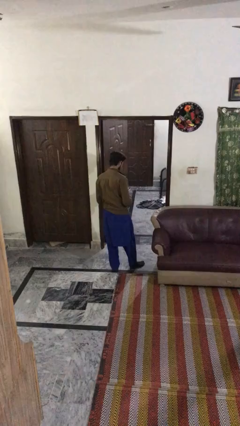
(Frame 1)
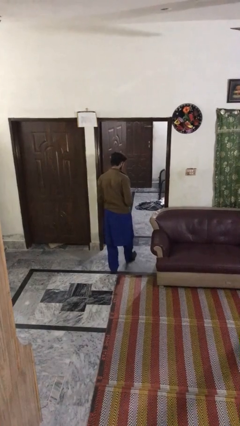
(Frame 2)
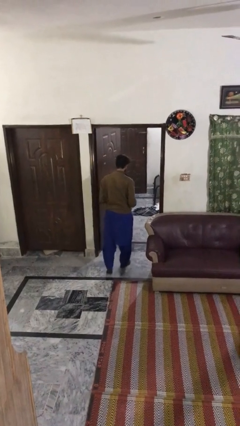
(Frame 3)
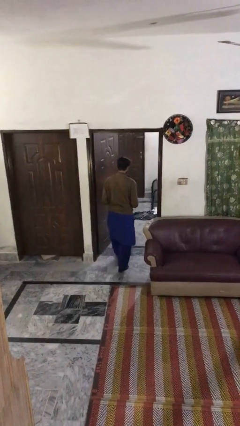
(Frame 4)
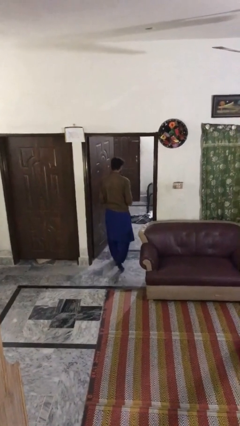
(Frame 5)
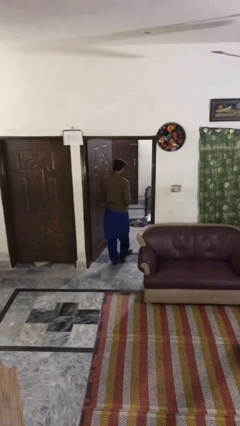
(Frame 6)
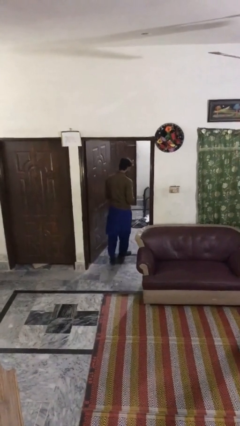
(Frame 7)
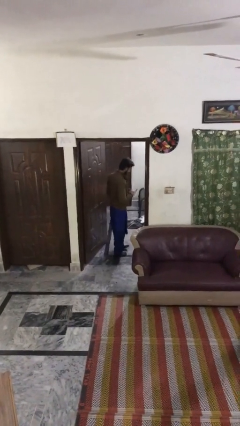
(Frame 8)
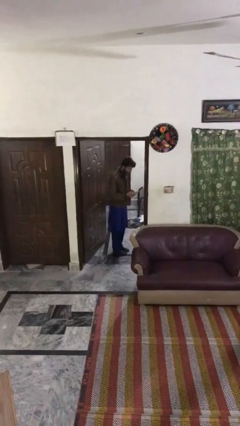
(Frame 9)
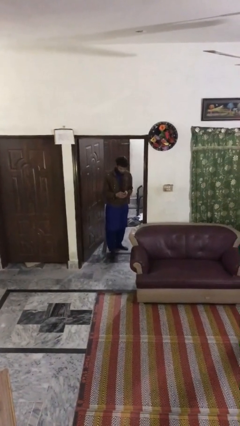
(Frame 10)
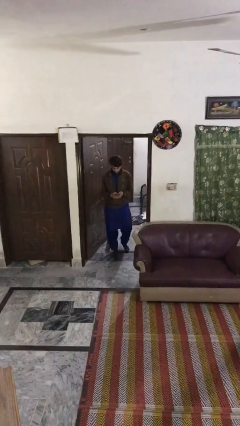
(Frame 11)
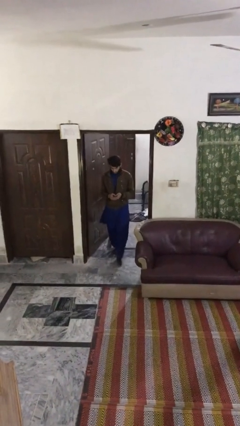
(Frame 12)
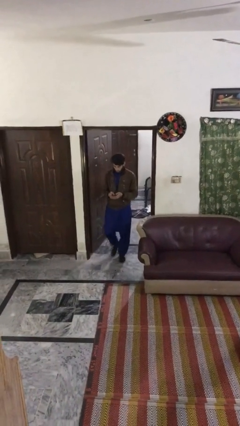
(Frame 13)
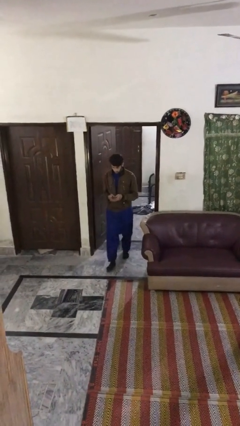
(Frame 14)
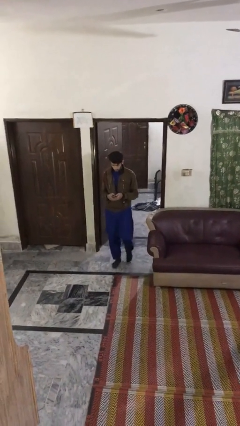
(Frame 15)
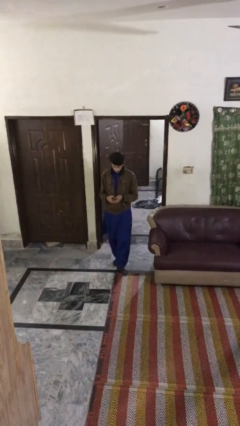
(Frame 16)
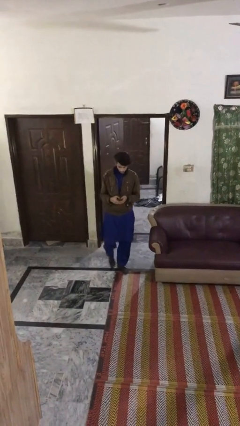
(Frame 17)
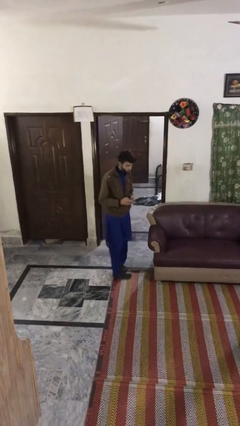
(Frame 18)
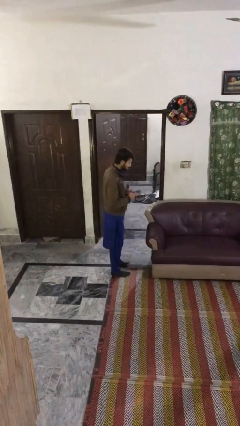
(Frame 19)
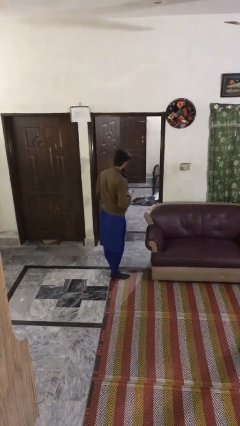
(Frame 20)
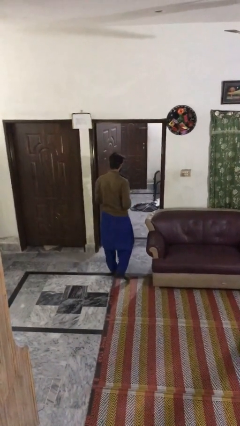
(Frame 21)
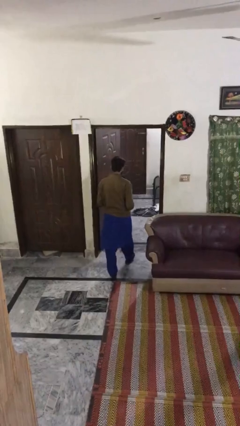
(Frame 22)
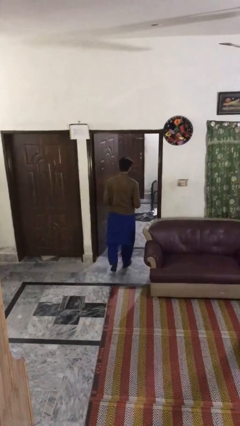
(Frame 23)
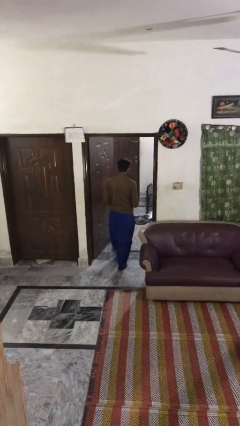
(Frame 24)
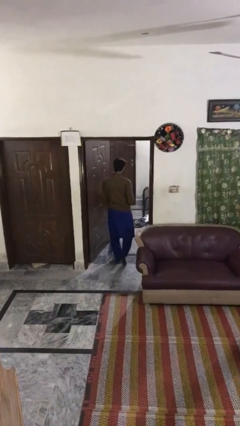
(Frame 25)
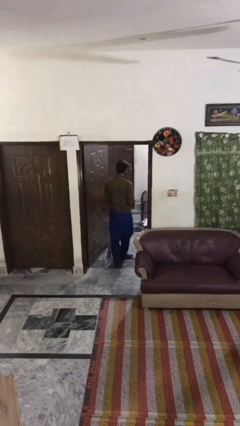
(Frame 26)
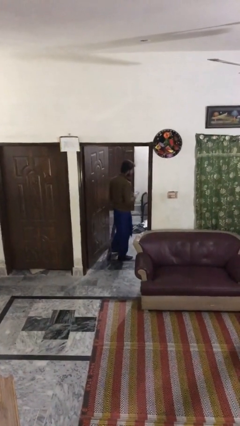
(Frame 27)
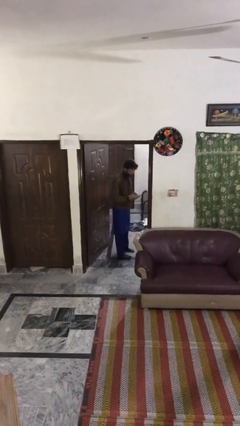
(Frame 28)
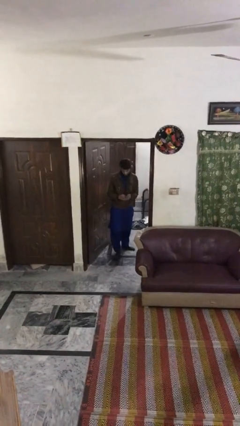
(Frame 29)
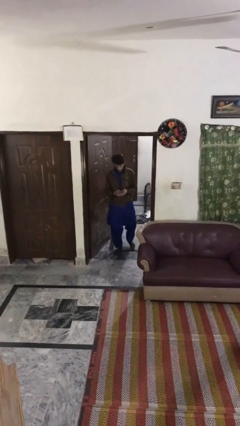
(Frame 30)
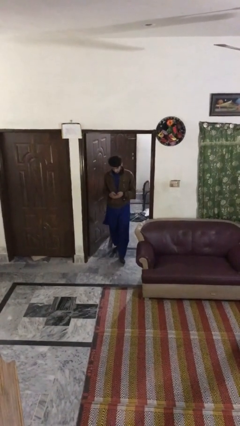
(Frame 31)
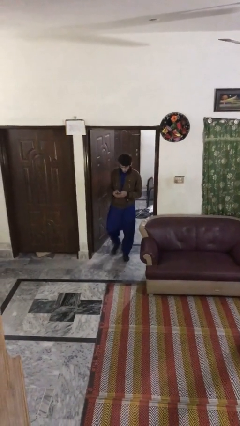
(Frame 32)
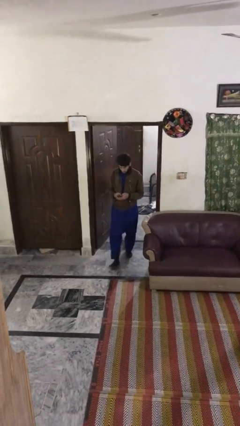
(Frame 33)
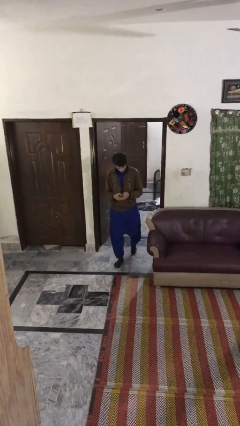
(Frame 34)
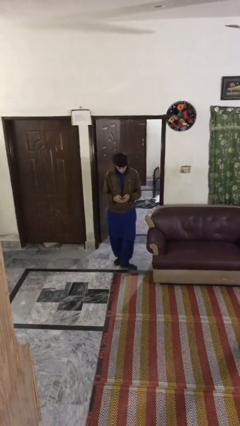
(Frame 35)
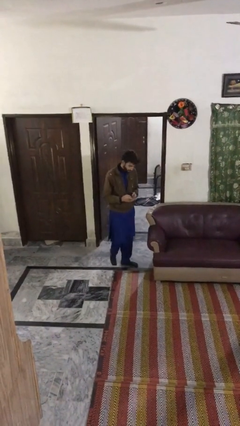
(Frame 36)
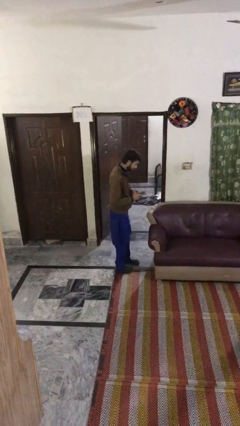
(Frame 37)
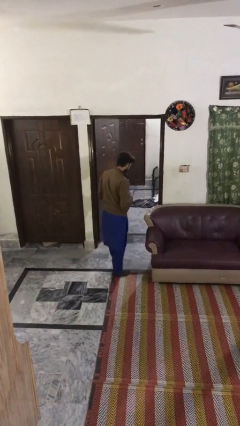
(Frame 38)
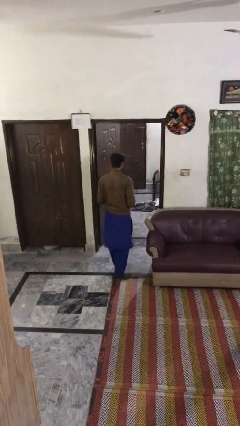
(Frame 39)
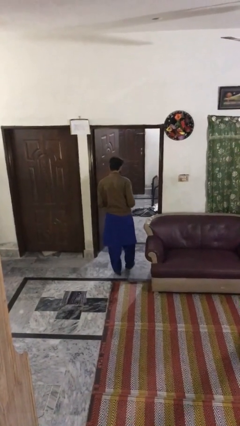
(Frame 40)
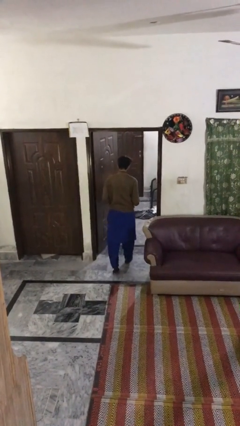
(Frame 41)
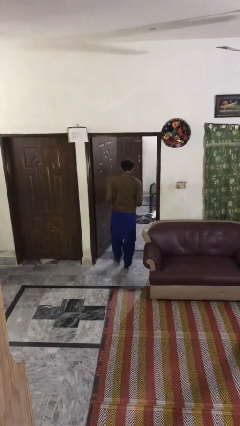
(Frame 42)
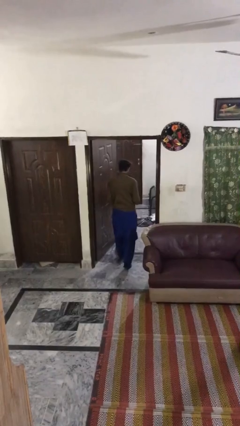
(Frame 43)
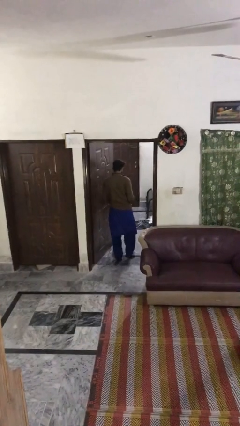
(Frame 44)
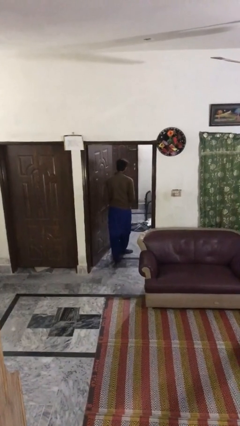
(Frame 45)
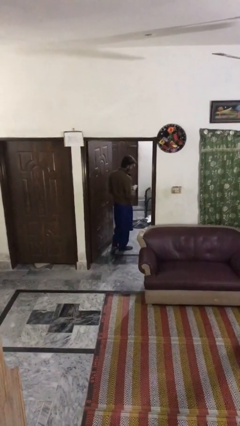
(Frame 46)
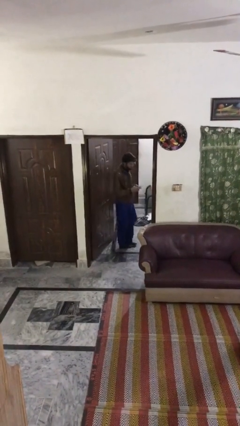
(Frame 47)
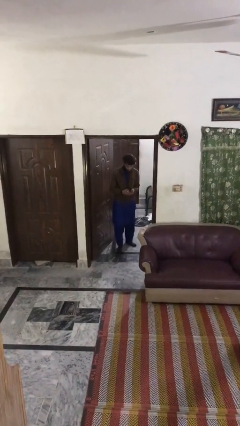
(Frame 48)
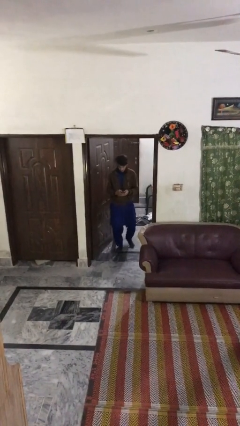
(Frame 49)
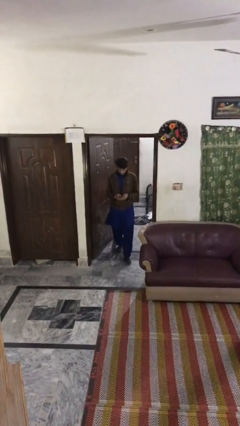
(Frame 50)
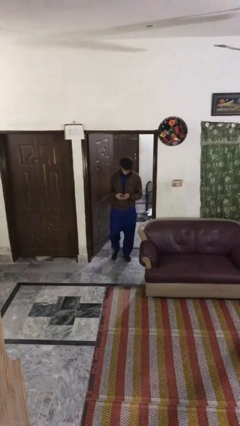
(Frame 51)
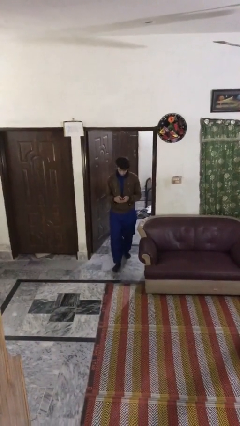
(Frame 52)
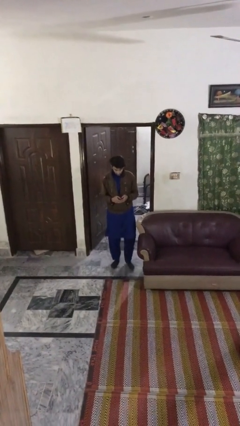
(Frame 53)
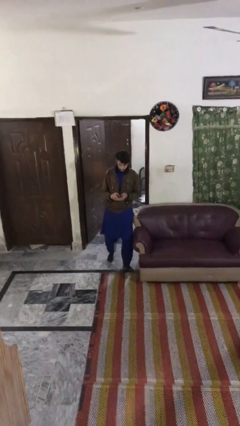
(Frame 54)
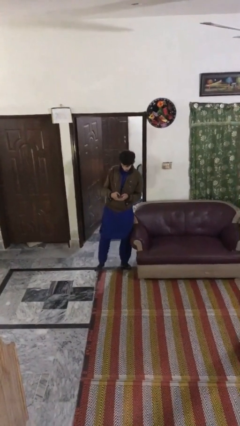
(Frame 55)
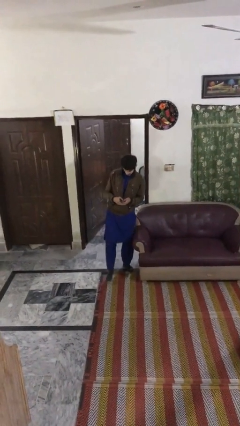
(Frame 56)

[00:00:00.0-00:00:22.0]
person texts on phone

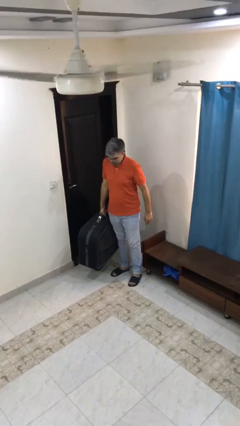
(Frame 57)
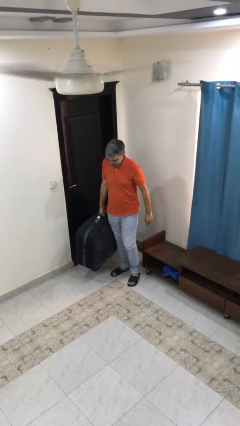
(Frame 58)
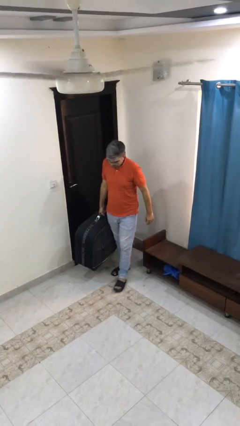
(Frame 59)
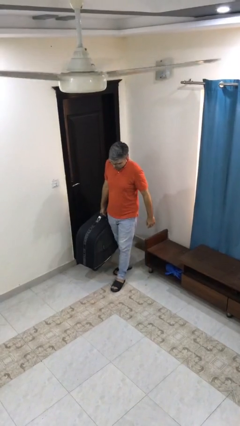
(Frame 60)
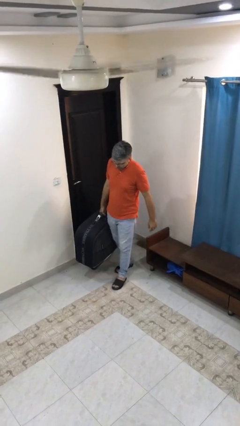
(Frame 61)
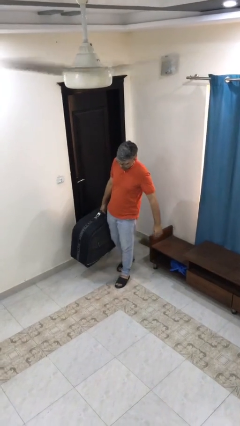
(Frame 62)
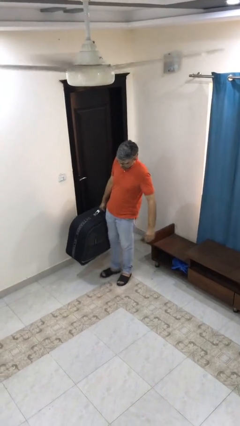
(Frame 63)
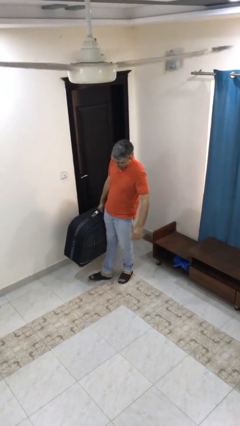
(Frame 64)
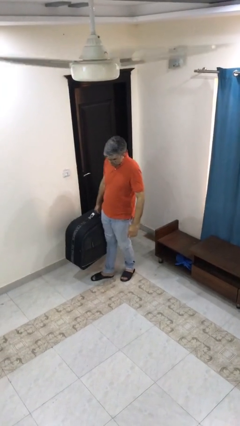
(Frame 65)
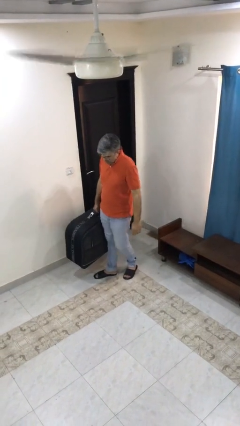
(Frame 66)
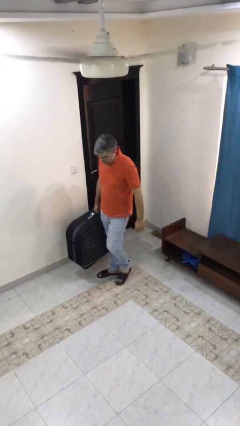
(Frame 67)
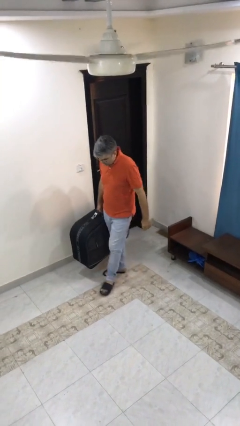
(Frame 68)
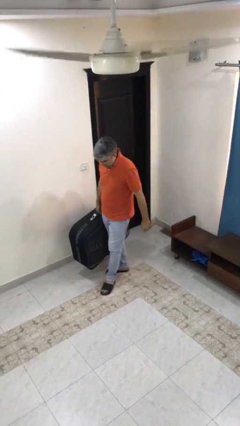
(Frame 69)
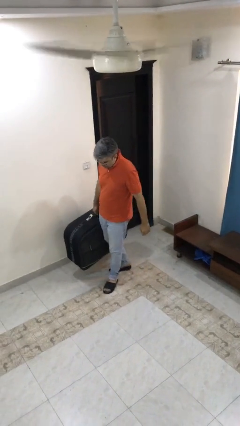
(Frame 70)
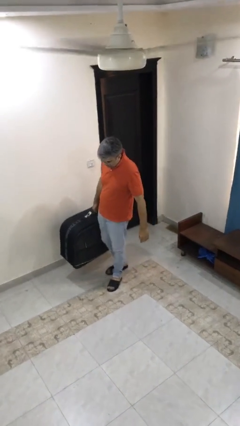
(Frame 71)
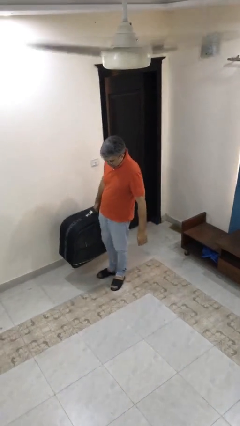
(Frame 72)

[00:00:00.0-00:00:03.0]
person carries heavy object

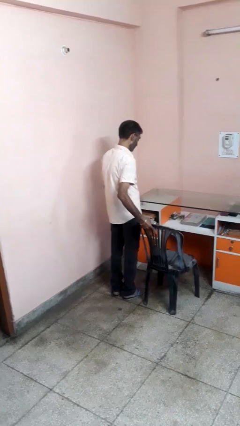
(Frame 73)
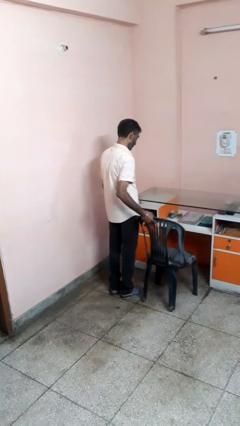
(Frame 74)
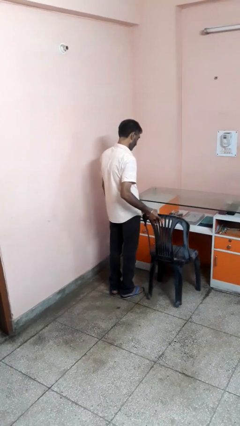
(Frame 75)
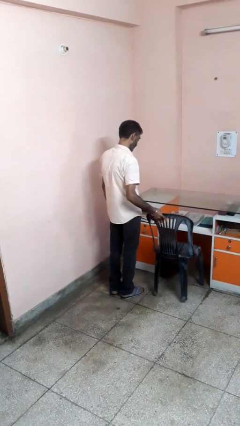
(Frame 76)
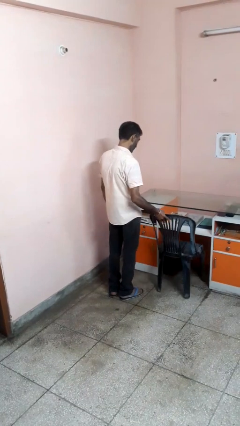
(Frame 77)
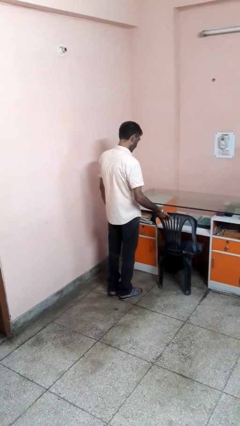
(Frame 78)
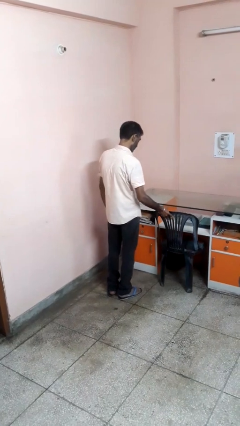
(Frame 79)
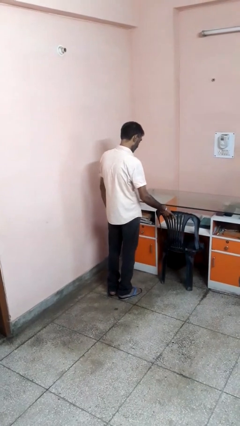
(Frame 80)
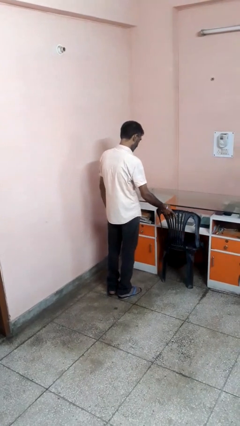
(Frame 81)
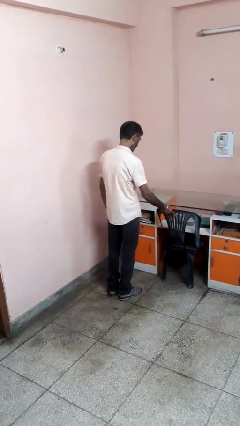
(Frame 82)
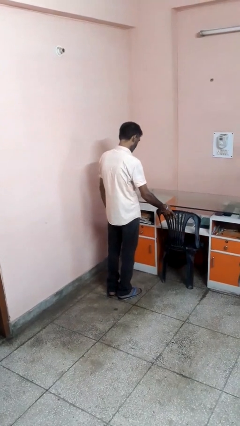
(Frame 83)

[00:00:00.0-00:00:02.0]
person pushes in chair

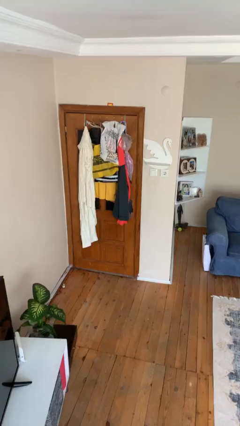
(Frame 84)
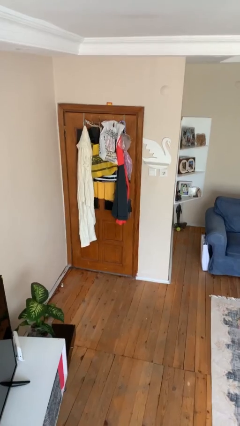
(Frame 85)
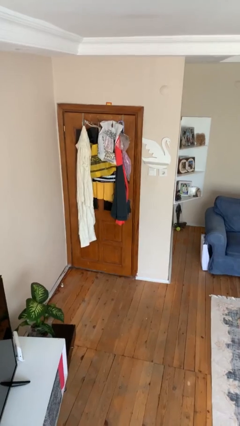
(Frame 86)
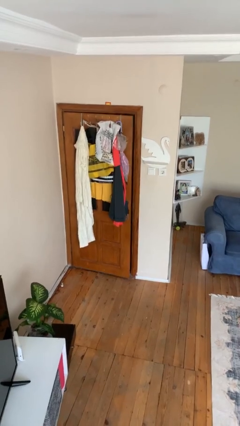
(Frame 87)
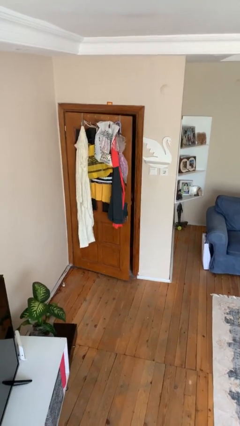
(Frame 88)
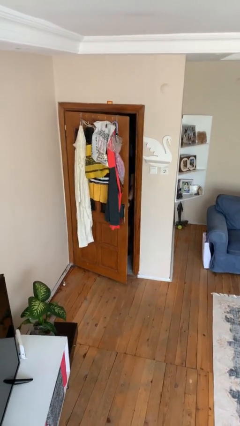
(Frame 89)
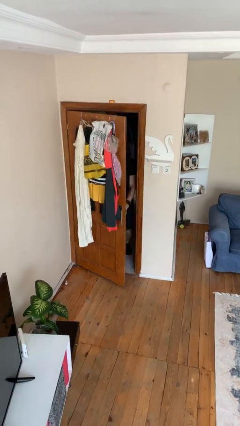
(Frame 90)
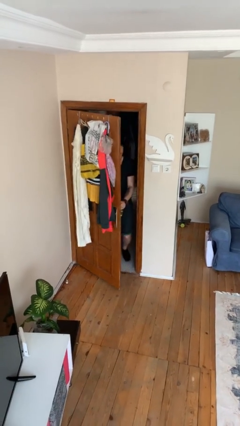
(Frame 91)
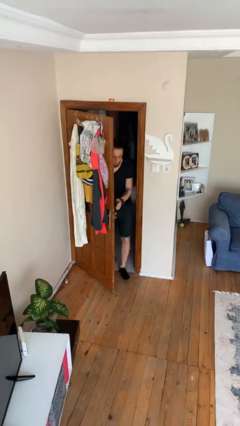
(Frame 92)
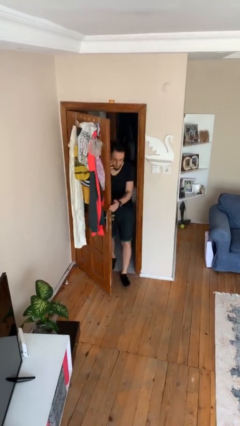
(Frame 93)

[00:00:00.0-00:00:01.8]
person opens facility door
